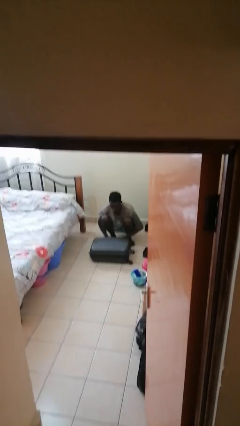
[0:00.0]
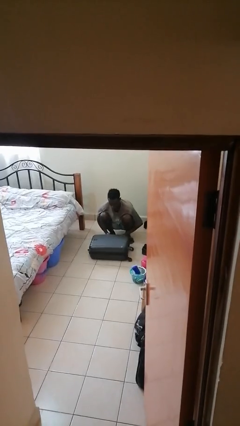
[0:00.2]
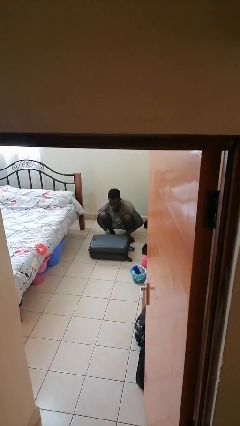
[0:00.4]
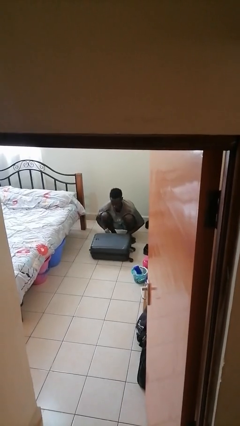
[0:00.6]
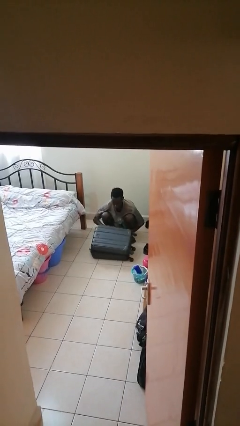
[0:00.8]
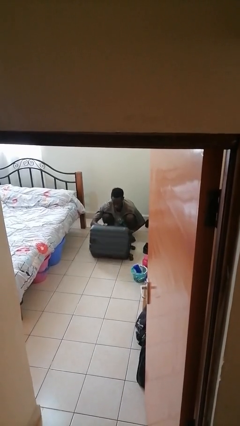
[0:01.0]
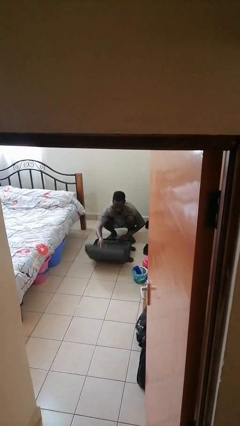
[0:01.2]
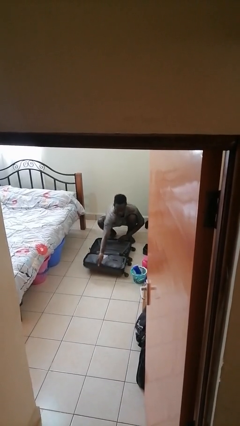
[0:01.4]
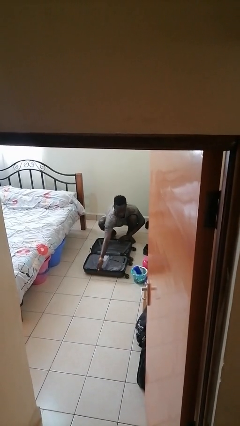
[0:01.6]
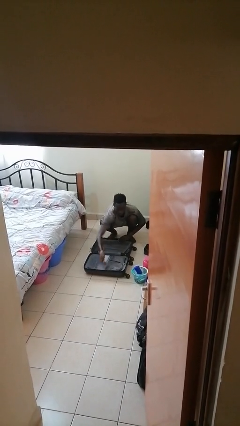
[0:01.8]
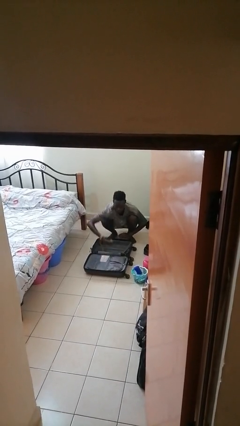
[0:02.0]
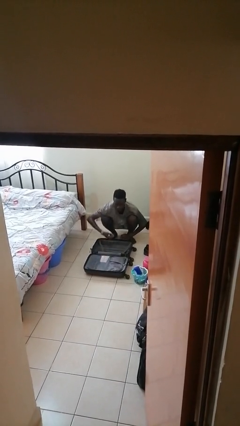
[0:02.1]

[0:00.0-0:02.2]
person opens suitcase

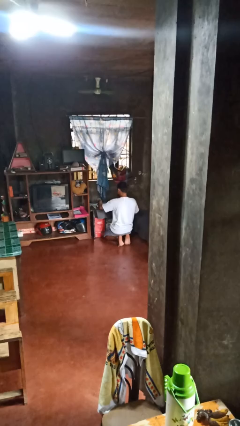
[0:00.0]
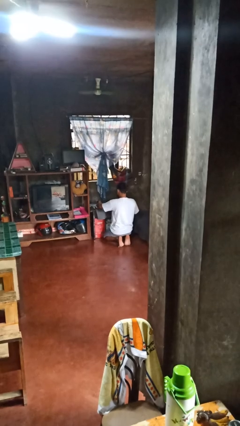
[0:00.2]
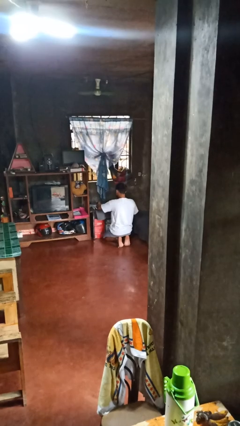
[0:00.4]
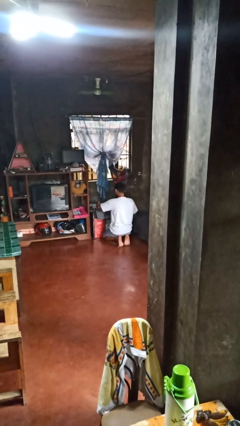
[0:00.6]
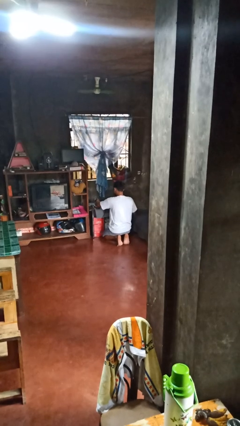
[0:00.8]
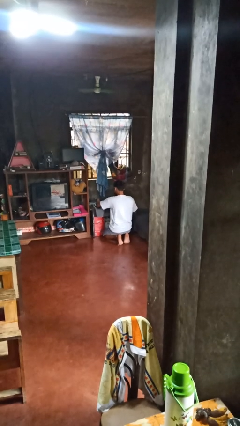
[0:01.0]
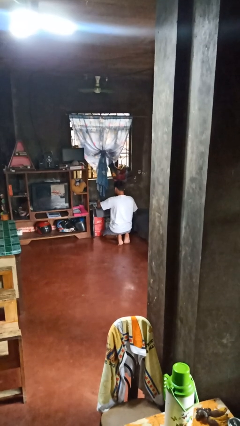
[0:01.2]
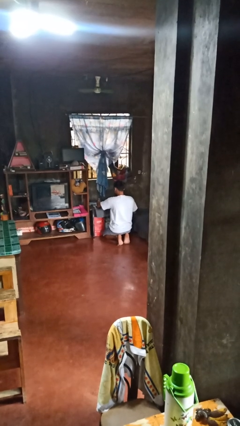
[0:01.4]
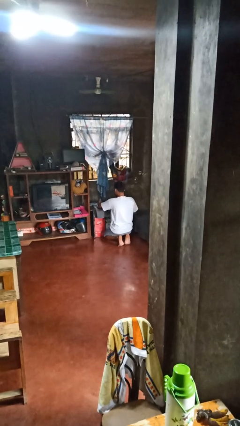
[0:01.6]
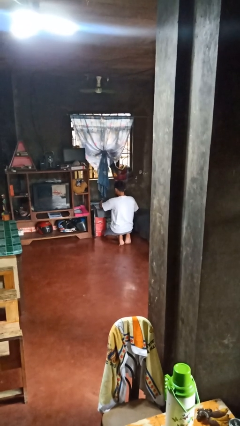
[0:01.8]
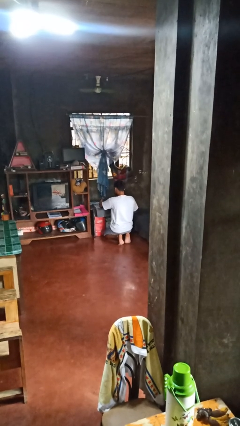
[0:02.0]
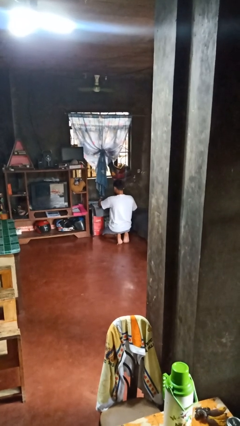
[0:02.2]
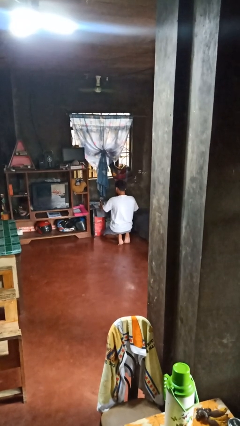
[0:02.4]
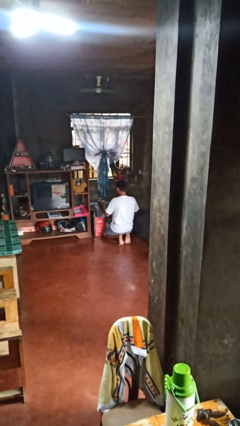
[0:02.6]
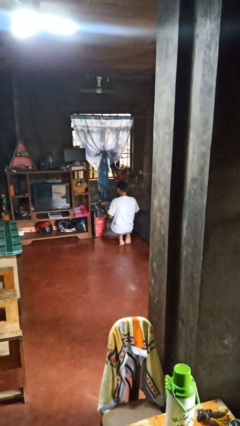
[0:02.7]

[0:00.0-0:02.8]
person irons clothes

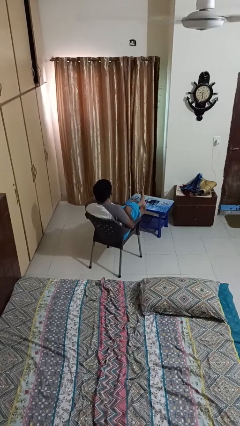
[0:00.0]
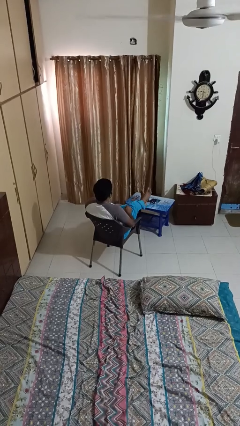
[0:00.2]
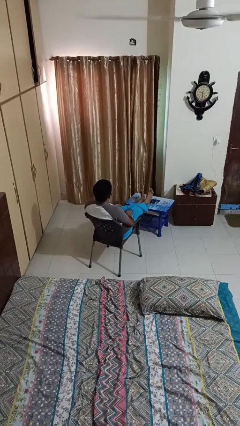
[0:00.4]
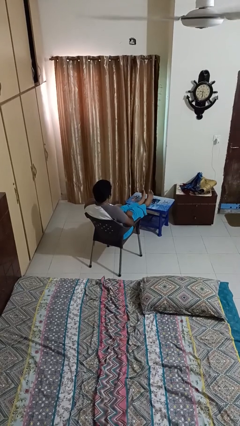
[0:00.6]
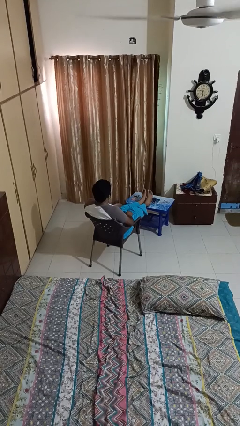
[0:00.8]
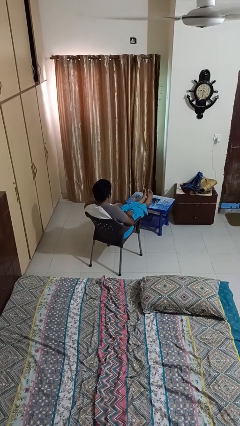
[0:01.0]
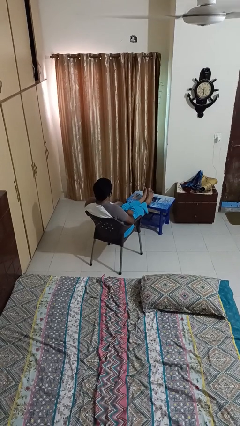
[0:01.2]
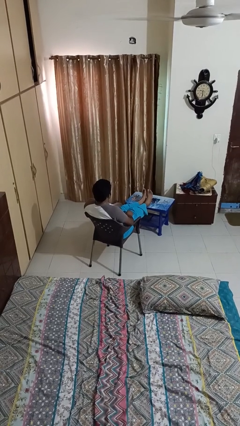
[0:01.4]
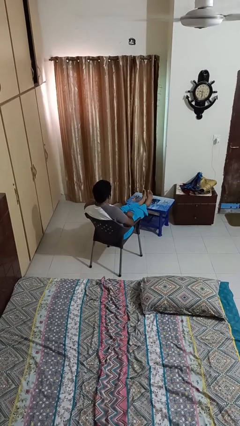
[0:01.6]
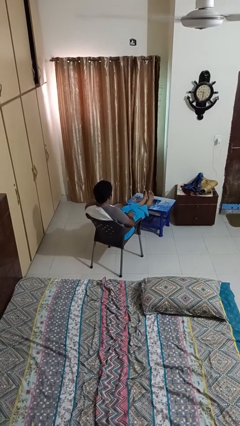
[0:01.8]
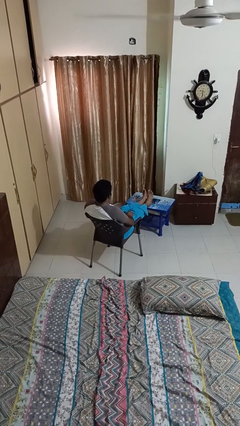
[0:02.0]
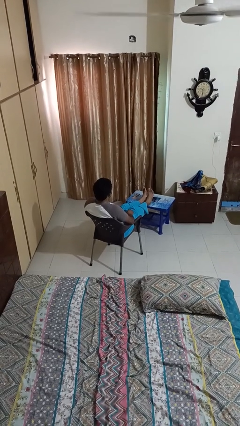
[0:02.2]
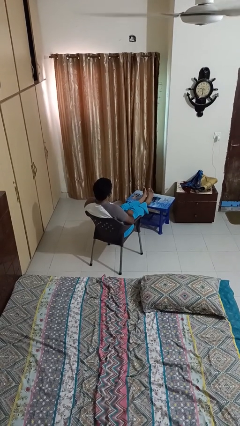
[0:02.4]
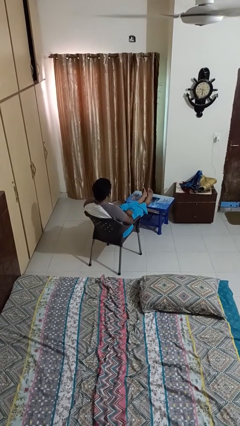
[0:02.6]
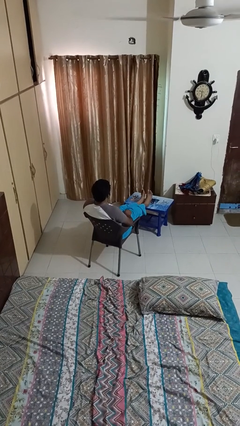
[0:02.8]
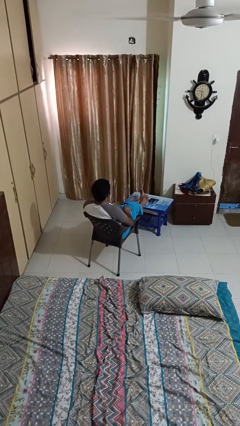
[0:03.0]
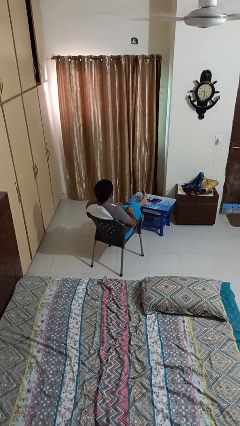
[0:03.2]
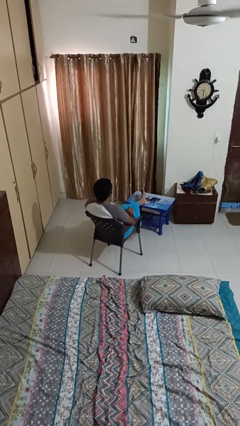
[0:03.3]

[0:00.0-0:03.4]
person puts feet up

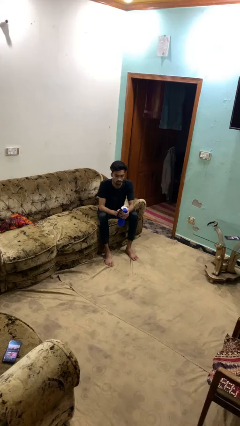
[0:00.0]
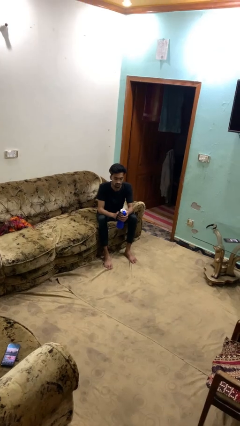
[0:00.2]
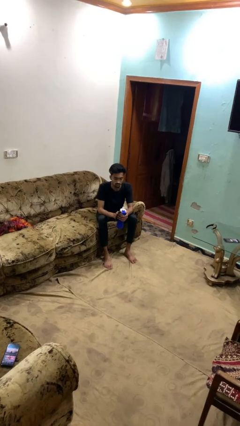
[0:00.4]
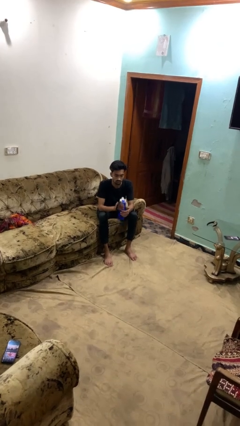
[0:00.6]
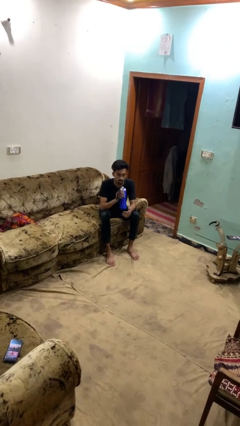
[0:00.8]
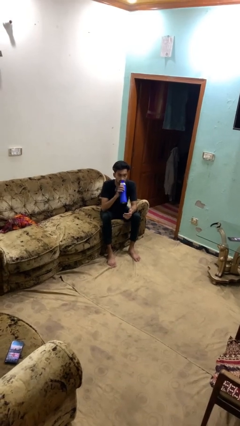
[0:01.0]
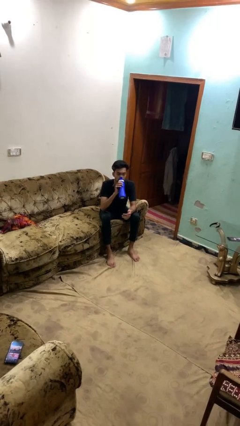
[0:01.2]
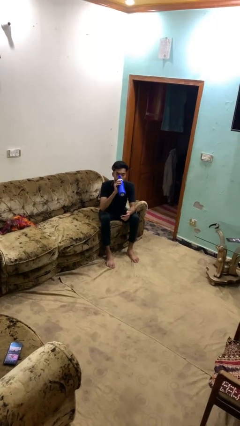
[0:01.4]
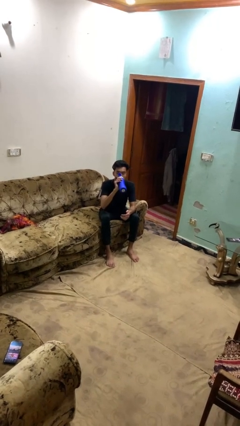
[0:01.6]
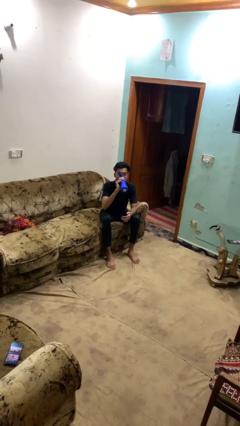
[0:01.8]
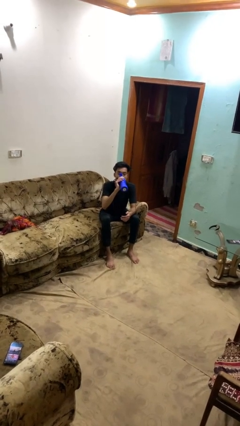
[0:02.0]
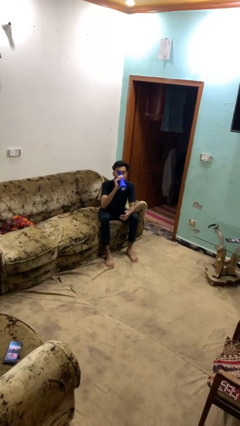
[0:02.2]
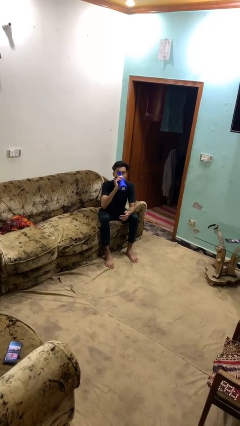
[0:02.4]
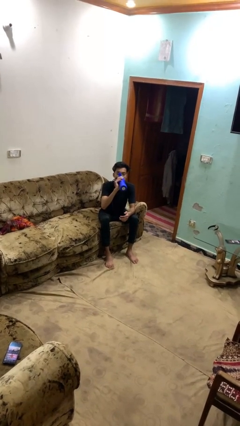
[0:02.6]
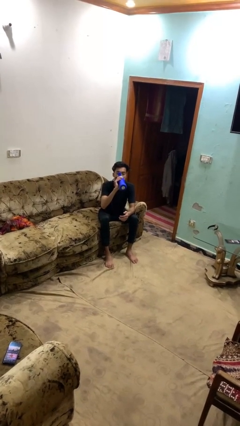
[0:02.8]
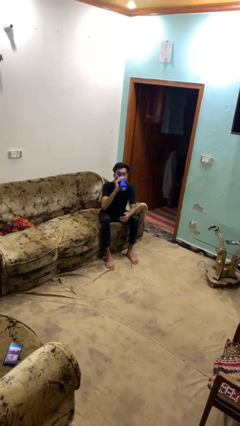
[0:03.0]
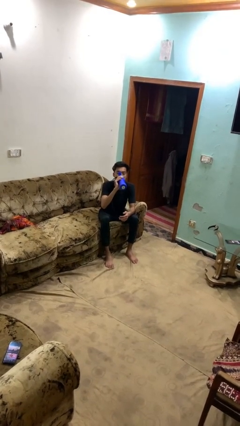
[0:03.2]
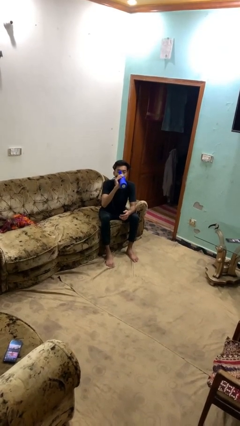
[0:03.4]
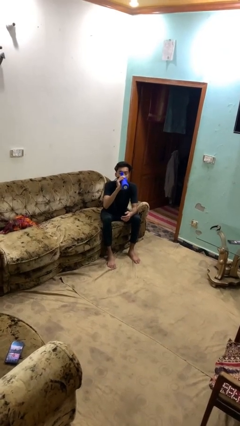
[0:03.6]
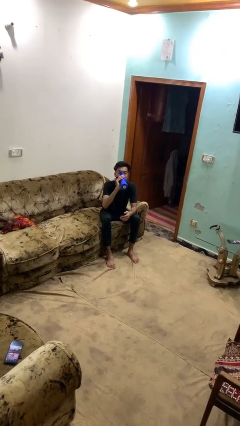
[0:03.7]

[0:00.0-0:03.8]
person drinks from bottle

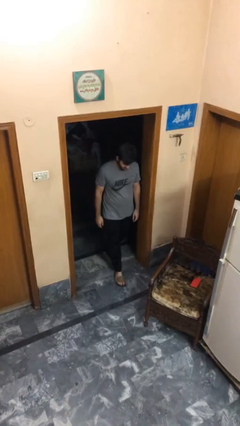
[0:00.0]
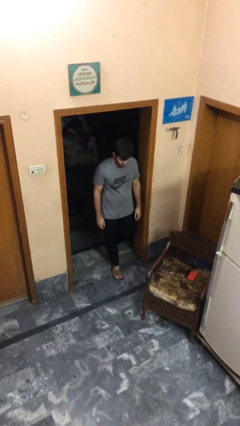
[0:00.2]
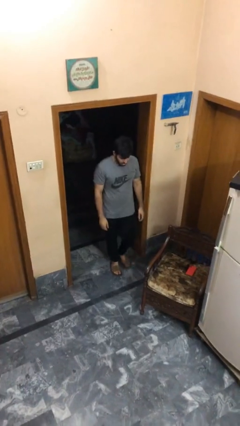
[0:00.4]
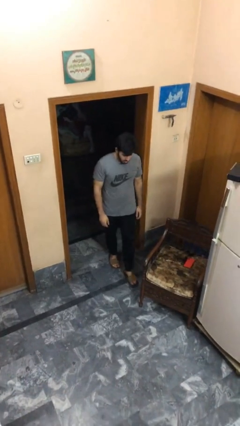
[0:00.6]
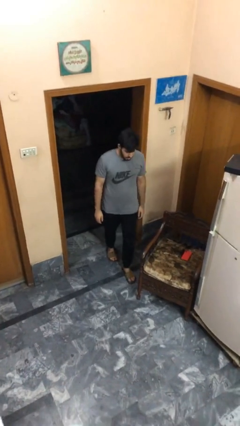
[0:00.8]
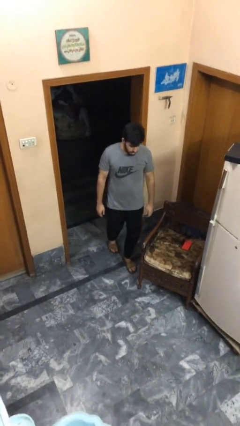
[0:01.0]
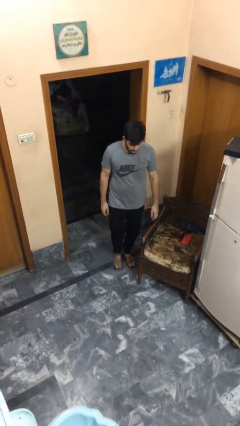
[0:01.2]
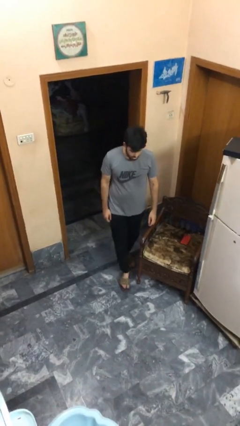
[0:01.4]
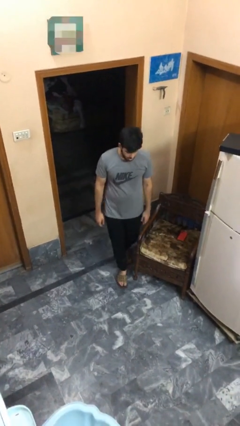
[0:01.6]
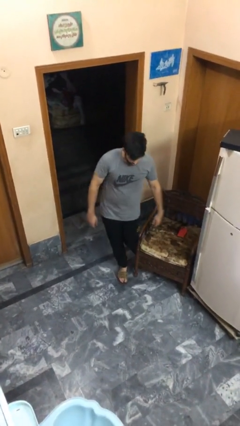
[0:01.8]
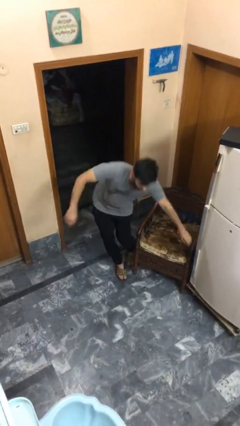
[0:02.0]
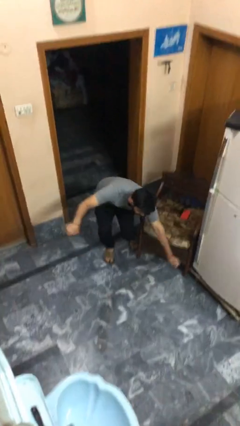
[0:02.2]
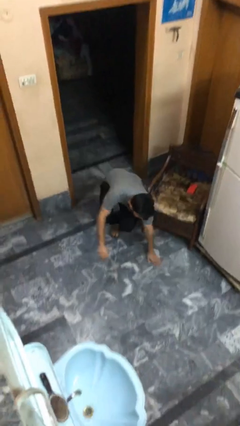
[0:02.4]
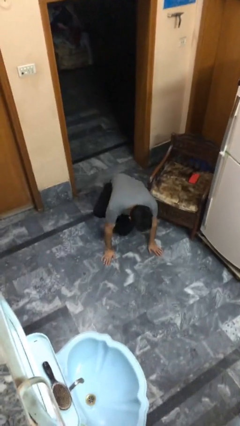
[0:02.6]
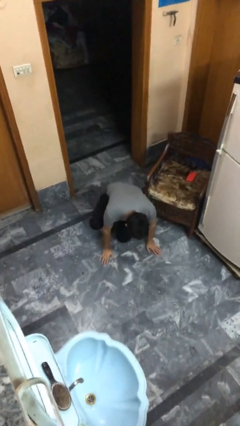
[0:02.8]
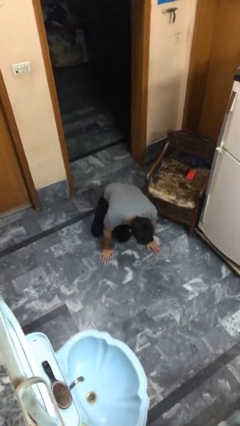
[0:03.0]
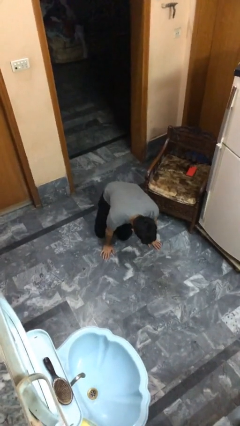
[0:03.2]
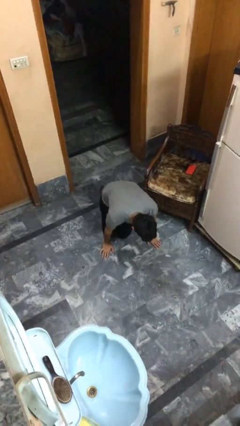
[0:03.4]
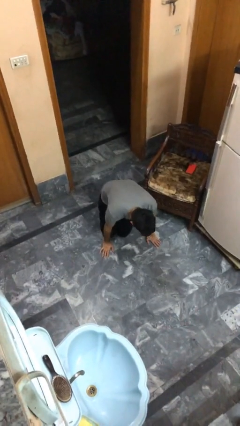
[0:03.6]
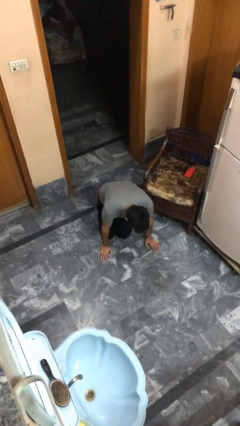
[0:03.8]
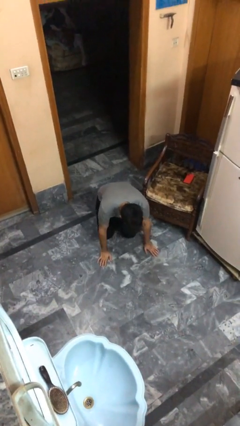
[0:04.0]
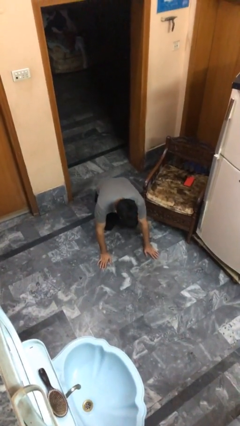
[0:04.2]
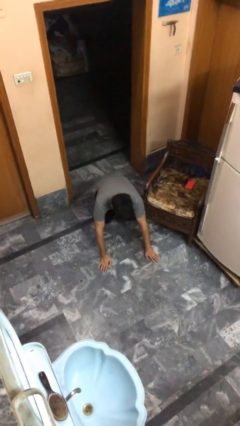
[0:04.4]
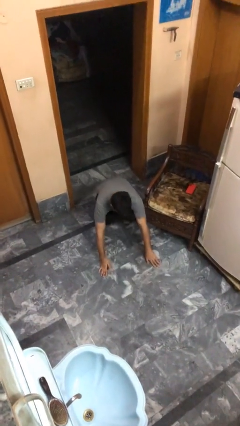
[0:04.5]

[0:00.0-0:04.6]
person trips on object on floor

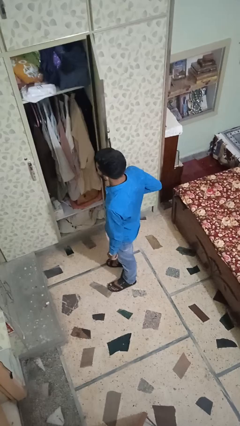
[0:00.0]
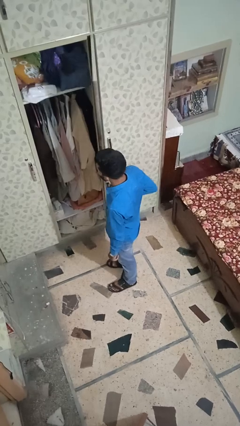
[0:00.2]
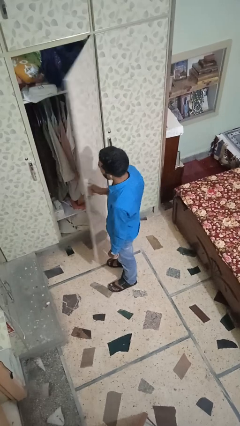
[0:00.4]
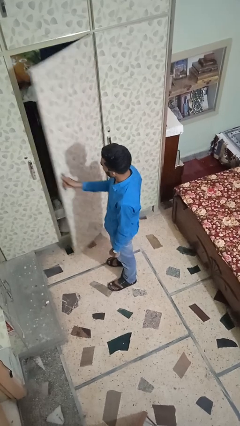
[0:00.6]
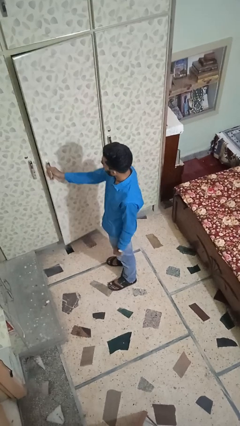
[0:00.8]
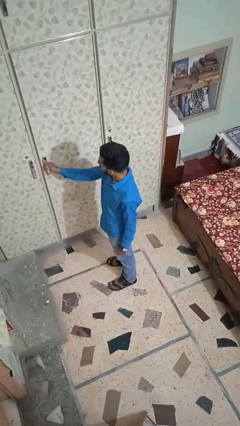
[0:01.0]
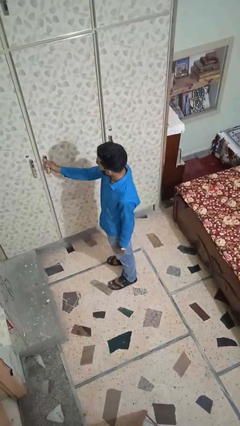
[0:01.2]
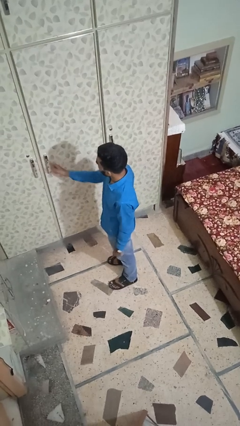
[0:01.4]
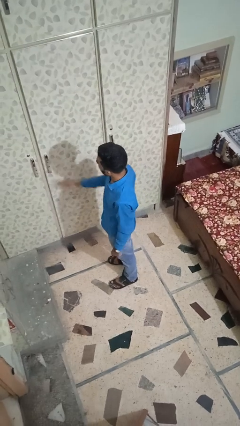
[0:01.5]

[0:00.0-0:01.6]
person closes closet door
